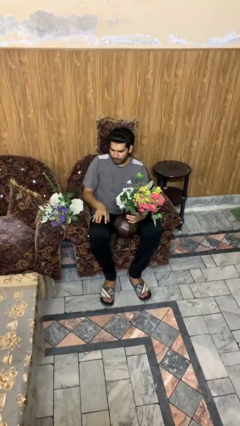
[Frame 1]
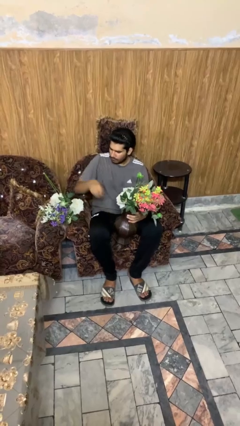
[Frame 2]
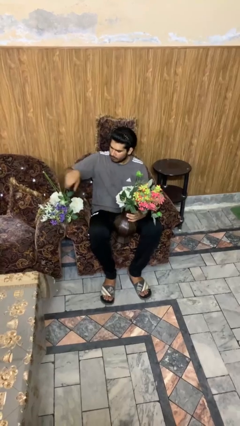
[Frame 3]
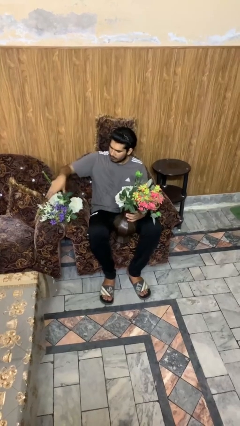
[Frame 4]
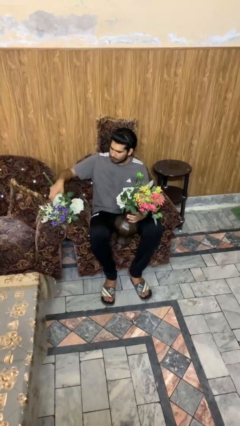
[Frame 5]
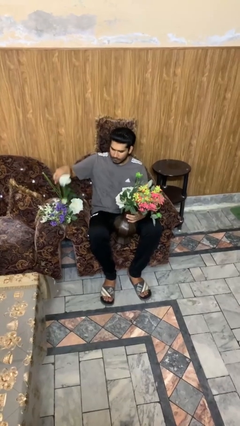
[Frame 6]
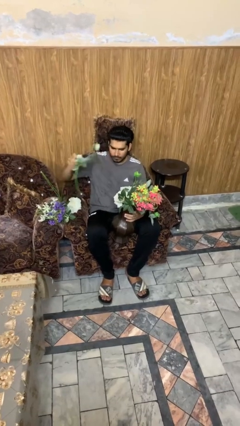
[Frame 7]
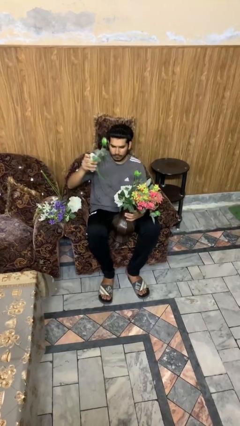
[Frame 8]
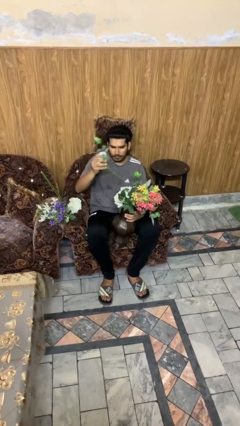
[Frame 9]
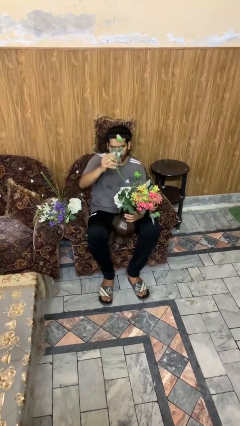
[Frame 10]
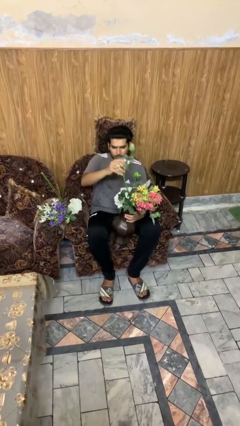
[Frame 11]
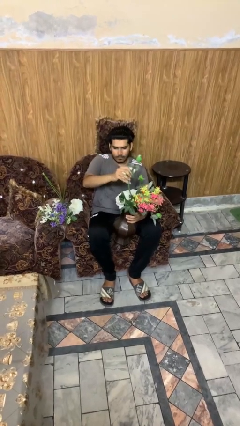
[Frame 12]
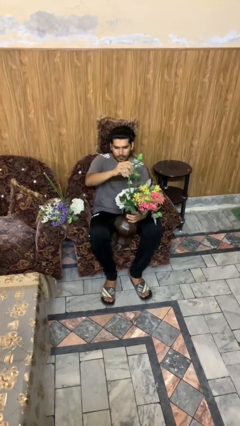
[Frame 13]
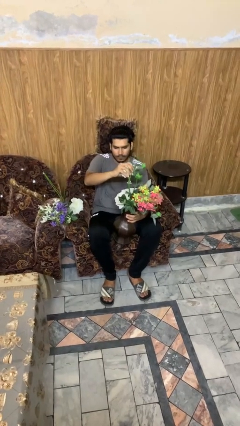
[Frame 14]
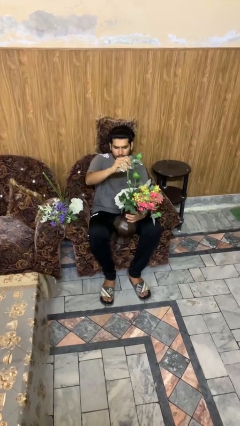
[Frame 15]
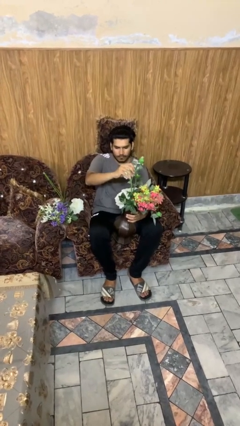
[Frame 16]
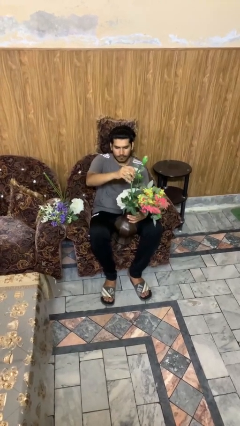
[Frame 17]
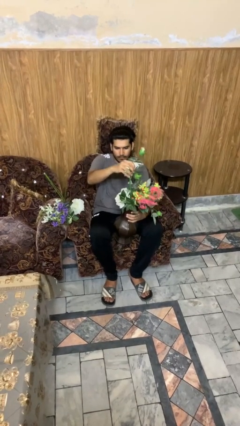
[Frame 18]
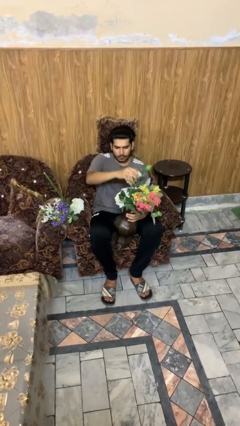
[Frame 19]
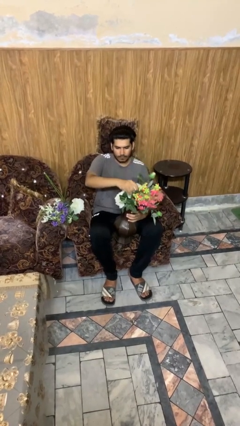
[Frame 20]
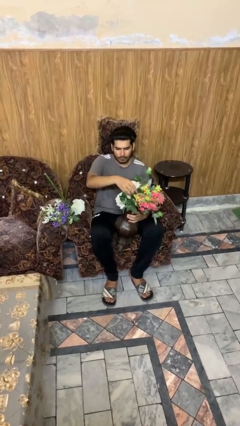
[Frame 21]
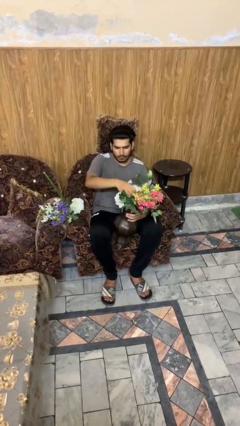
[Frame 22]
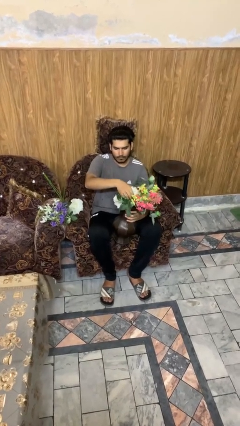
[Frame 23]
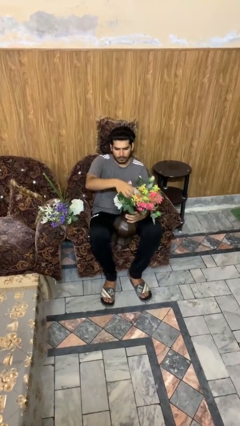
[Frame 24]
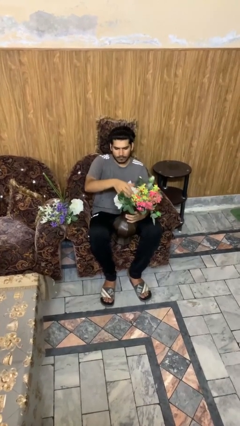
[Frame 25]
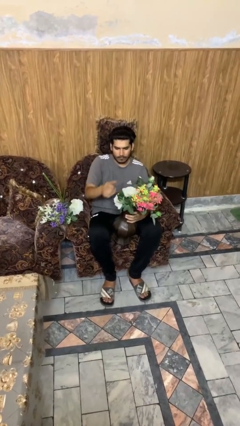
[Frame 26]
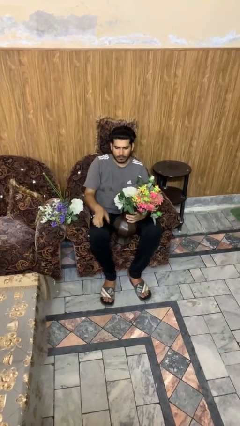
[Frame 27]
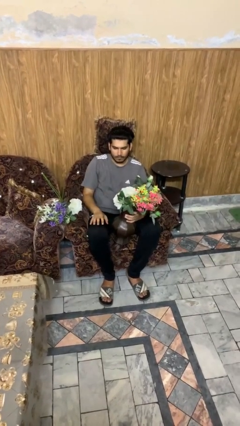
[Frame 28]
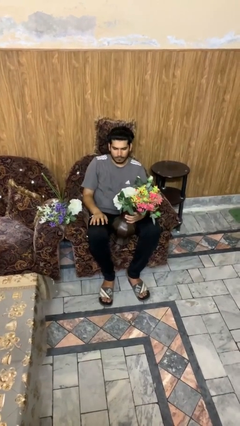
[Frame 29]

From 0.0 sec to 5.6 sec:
person arranges flowers in vase

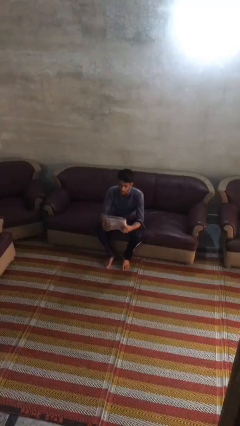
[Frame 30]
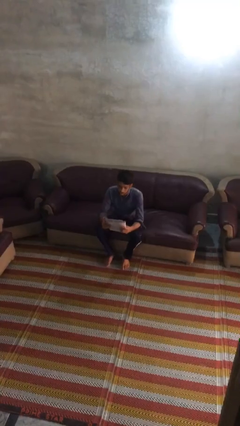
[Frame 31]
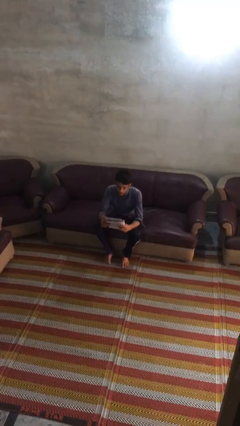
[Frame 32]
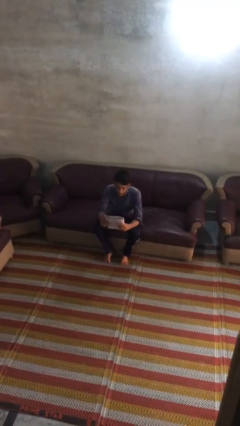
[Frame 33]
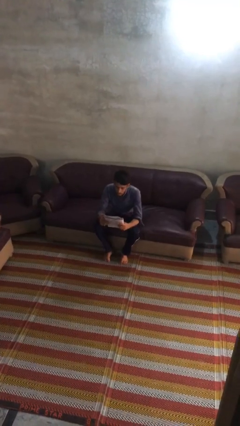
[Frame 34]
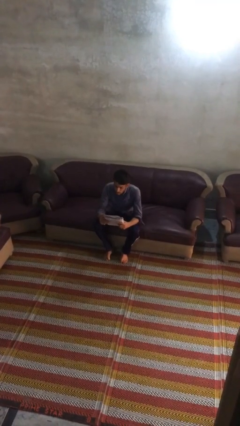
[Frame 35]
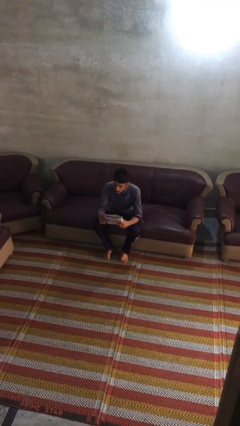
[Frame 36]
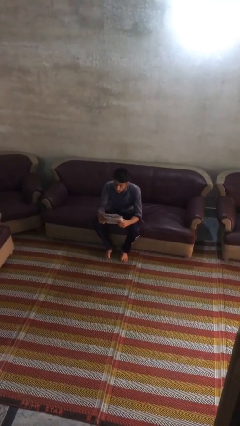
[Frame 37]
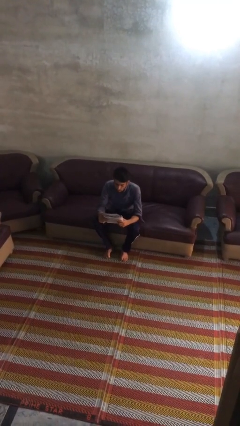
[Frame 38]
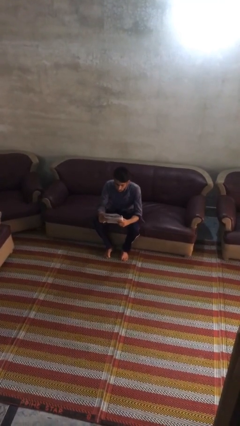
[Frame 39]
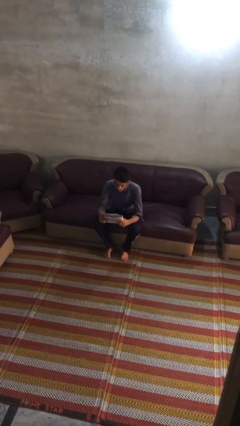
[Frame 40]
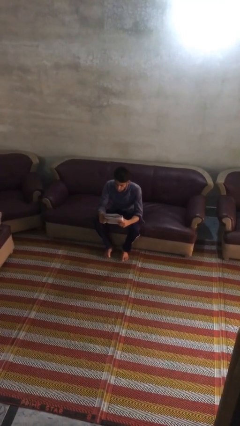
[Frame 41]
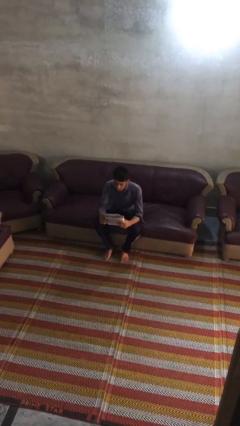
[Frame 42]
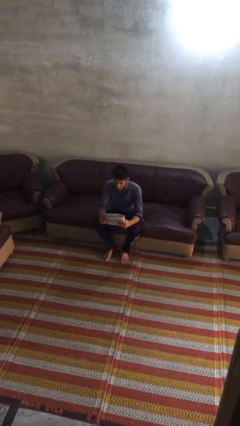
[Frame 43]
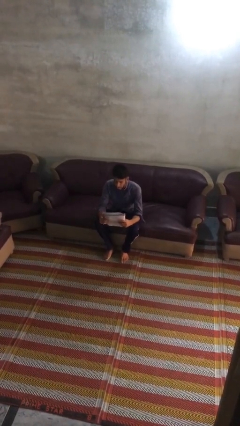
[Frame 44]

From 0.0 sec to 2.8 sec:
person reads document

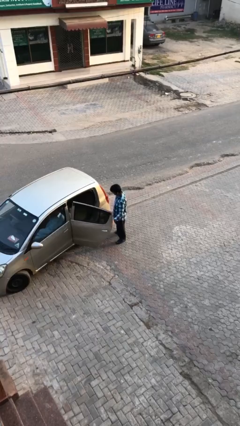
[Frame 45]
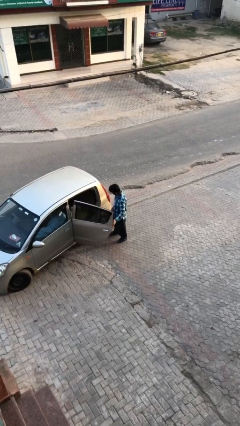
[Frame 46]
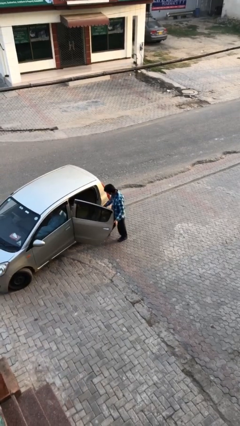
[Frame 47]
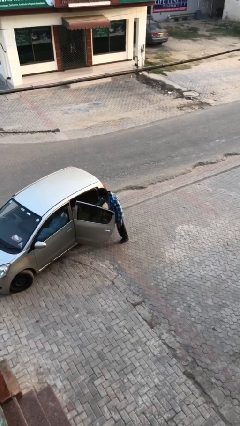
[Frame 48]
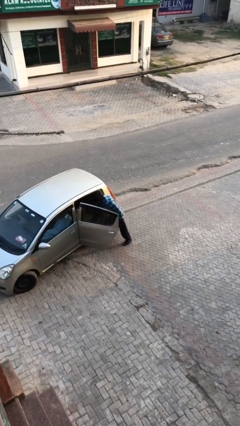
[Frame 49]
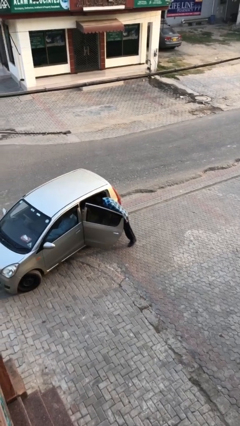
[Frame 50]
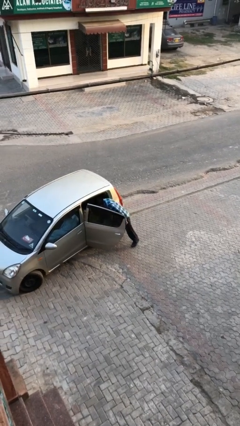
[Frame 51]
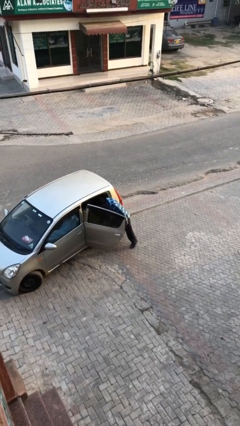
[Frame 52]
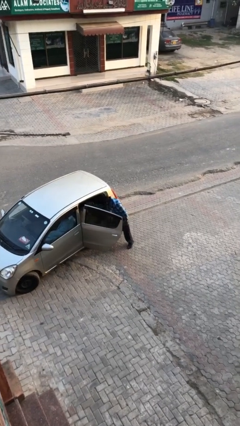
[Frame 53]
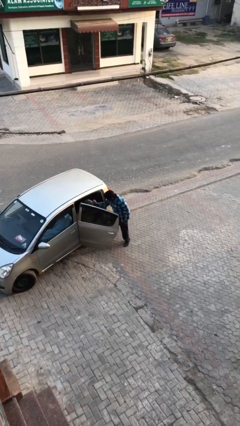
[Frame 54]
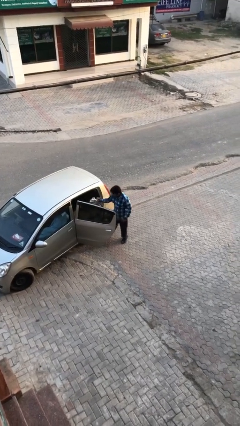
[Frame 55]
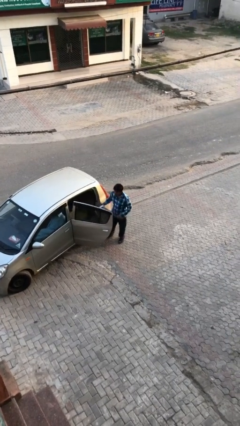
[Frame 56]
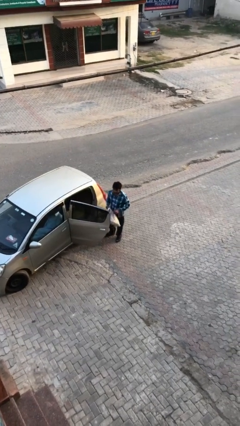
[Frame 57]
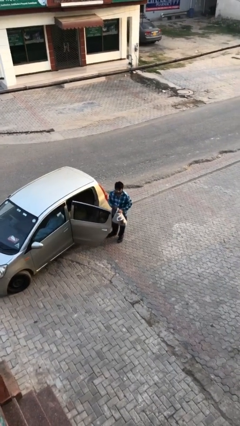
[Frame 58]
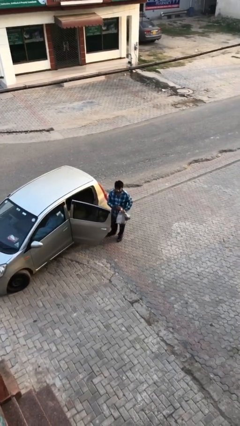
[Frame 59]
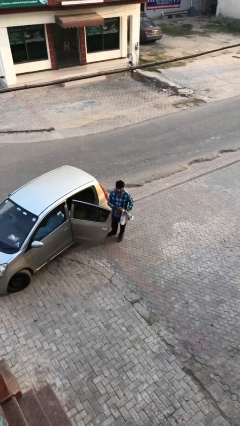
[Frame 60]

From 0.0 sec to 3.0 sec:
person unloads car

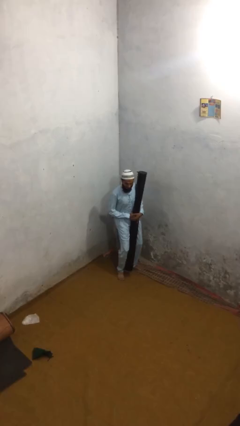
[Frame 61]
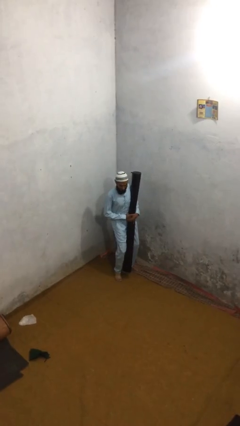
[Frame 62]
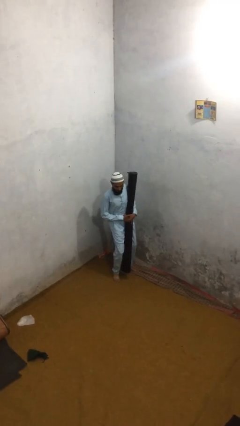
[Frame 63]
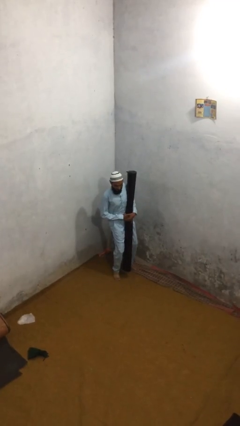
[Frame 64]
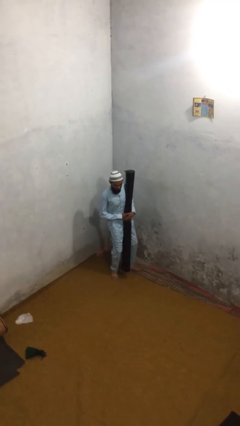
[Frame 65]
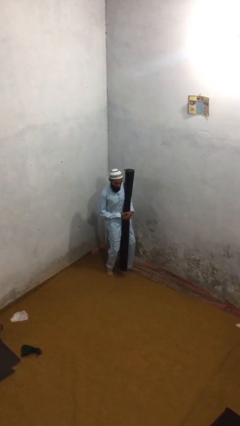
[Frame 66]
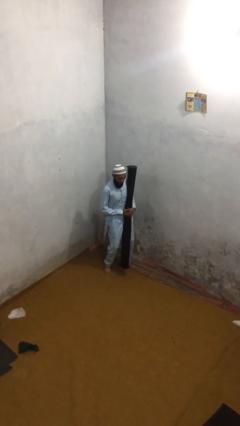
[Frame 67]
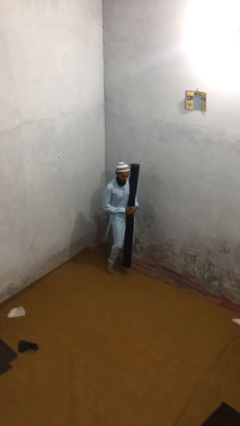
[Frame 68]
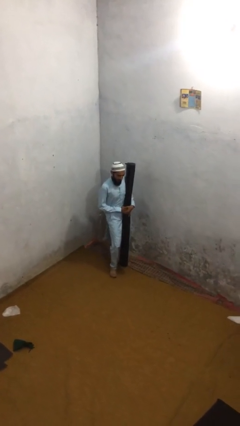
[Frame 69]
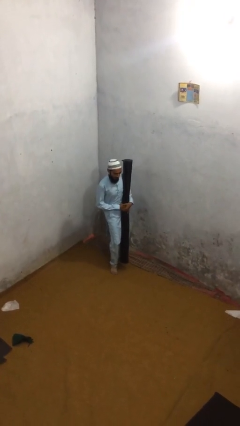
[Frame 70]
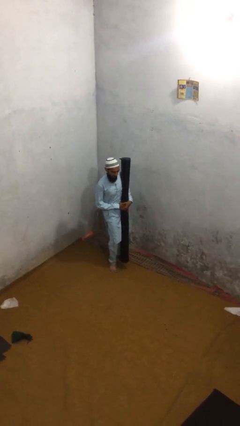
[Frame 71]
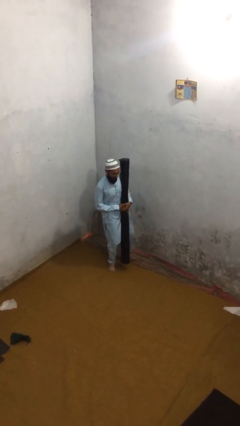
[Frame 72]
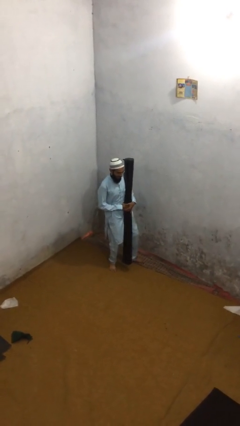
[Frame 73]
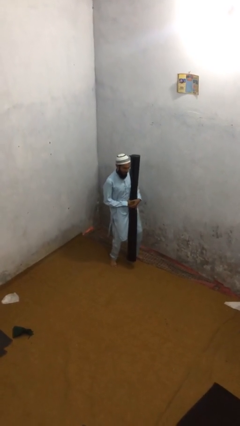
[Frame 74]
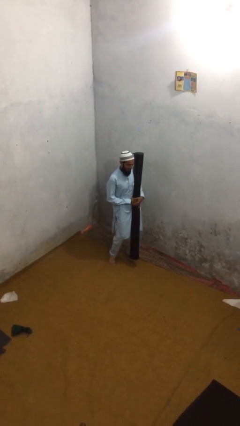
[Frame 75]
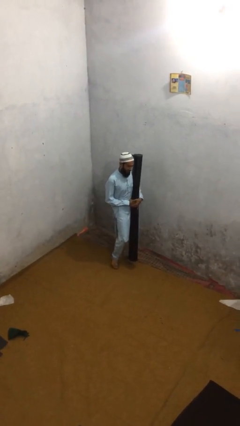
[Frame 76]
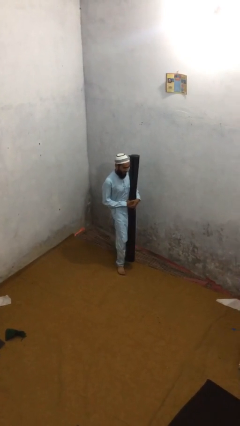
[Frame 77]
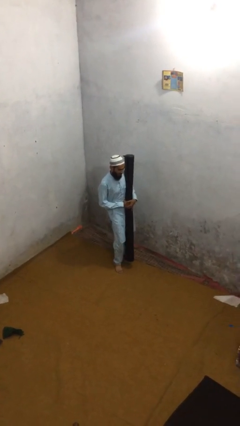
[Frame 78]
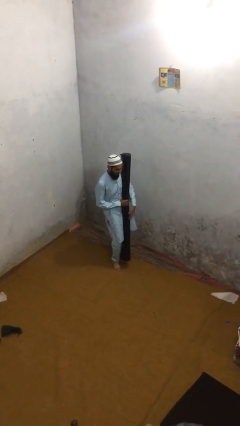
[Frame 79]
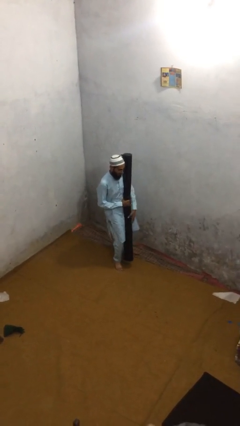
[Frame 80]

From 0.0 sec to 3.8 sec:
person carries heavy object

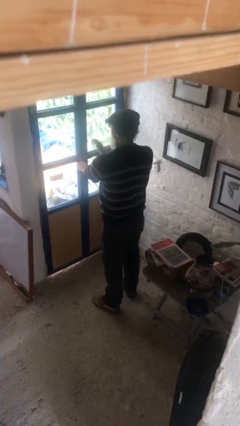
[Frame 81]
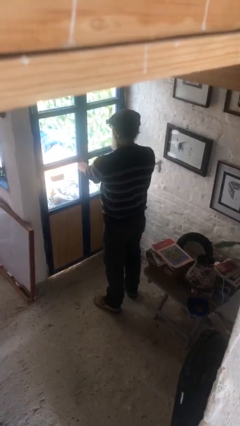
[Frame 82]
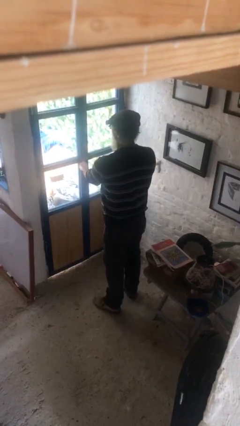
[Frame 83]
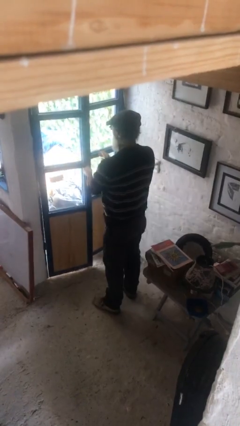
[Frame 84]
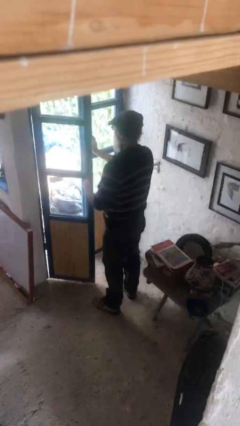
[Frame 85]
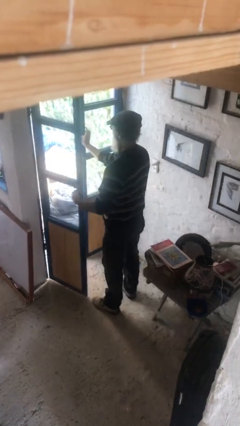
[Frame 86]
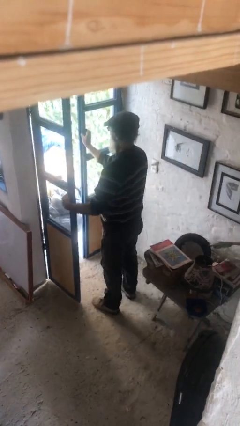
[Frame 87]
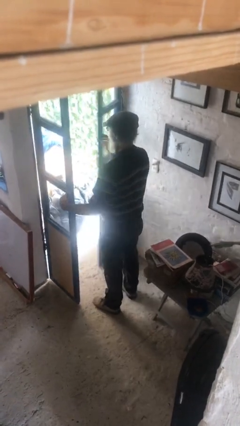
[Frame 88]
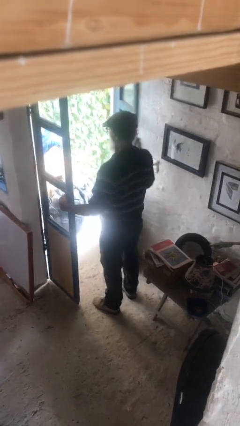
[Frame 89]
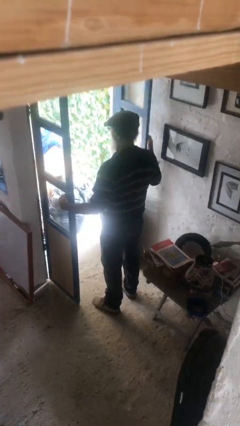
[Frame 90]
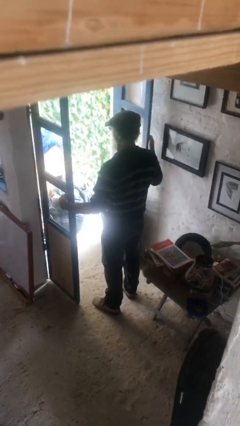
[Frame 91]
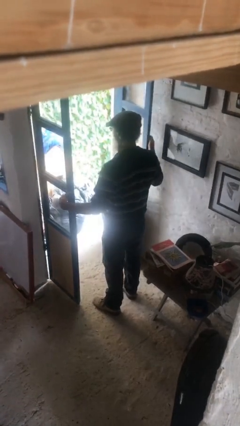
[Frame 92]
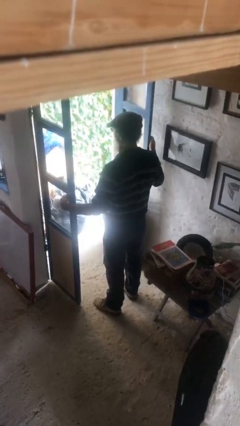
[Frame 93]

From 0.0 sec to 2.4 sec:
person opens facility door
